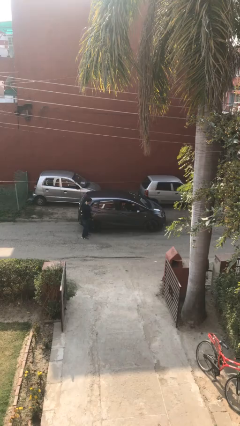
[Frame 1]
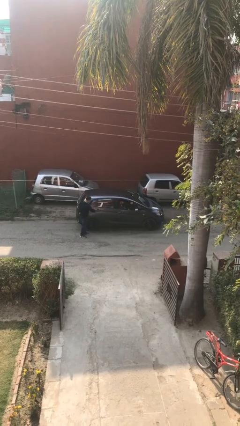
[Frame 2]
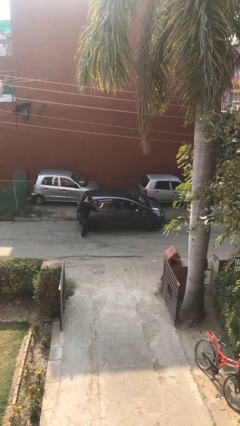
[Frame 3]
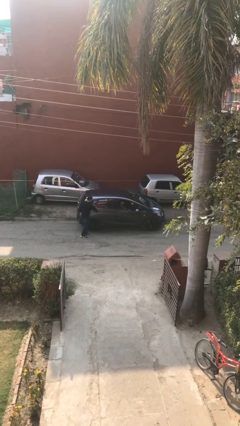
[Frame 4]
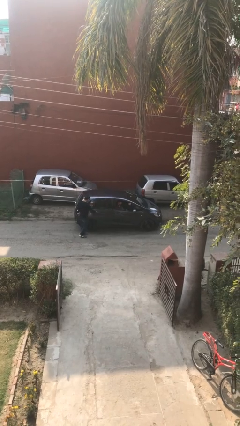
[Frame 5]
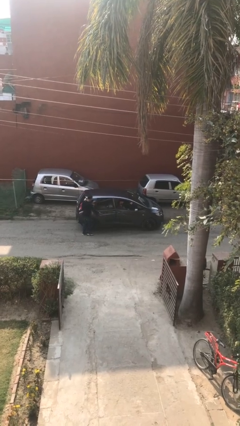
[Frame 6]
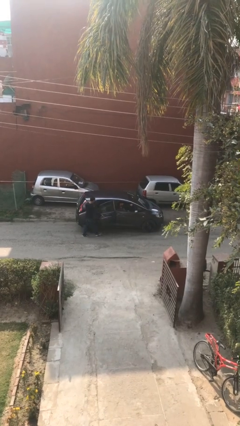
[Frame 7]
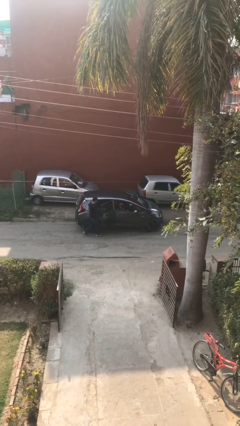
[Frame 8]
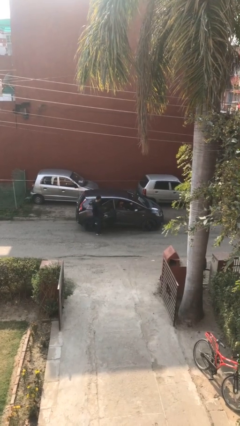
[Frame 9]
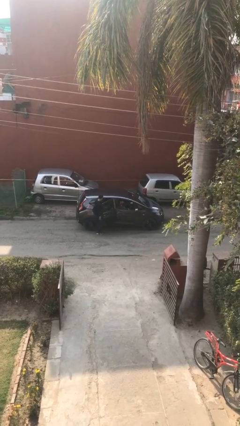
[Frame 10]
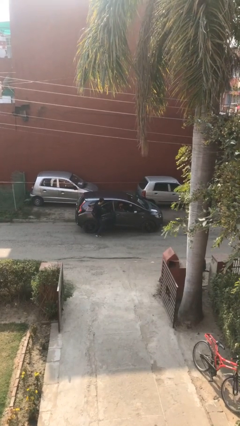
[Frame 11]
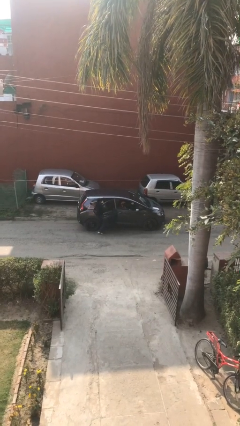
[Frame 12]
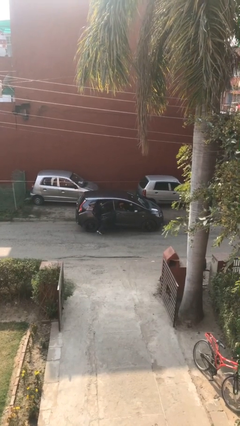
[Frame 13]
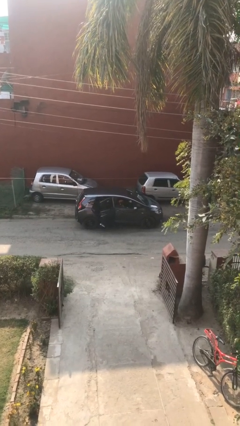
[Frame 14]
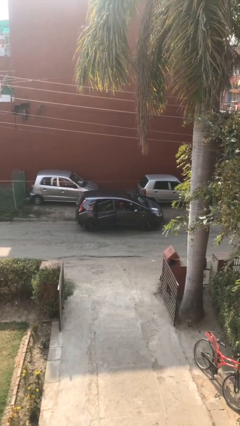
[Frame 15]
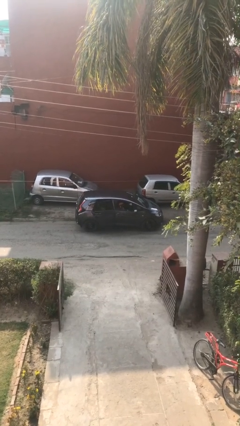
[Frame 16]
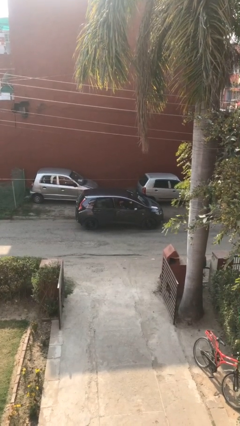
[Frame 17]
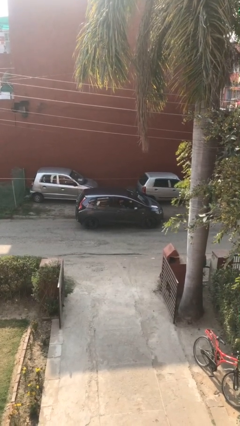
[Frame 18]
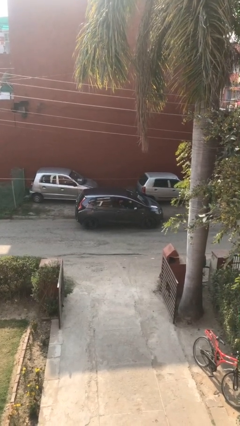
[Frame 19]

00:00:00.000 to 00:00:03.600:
car picks up person

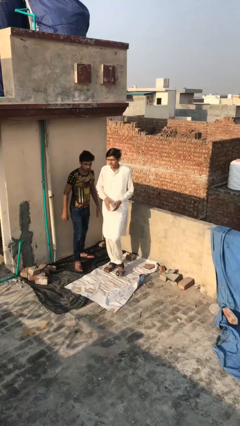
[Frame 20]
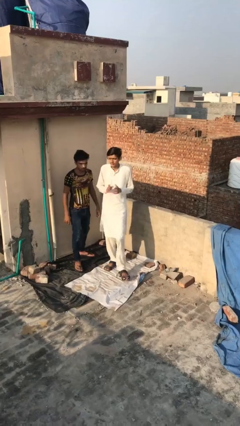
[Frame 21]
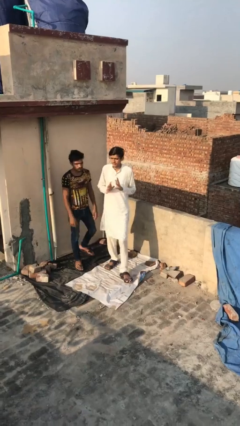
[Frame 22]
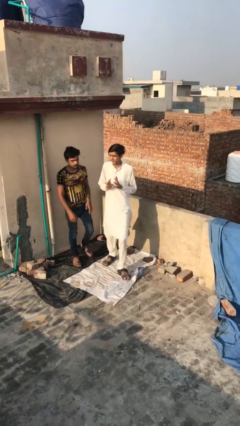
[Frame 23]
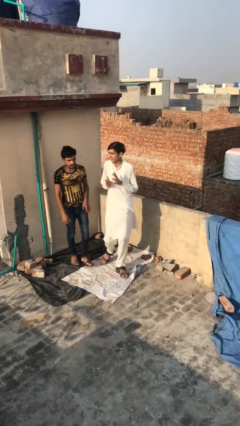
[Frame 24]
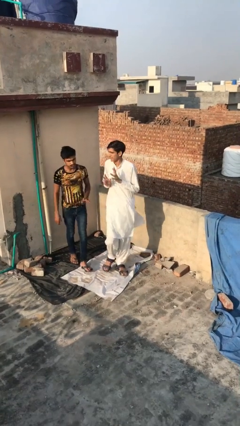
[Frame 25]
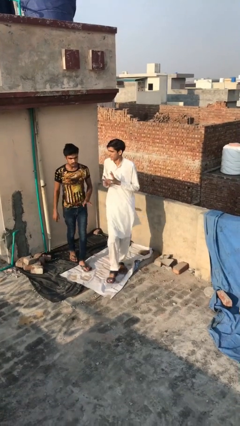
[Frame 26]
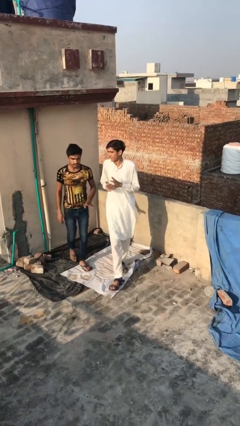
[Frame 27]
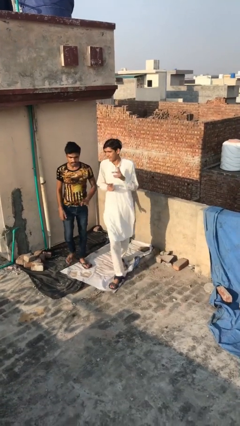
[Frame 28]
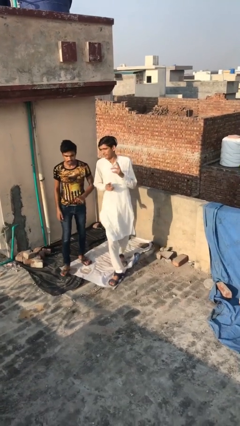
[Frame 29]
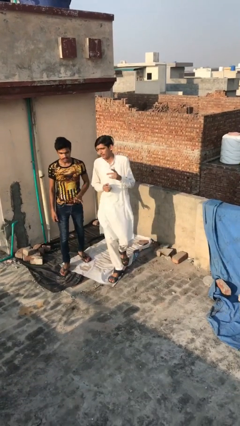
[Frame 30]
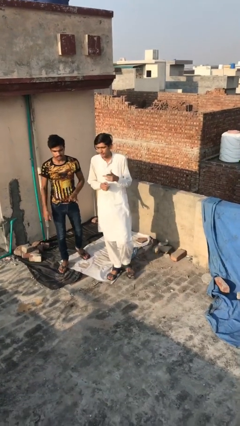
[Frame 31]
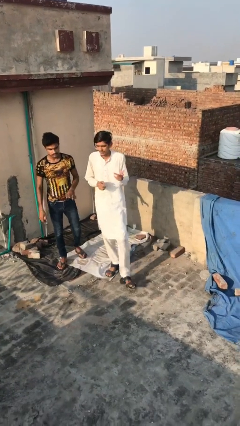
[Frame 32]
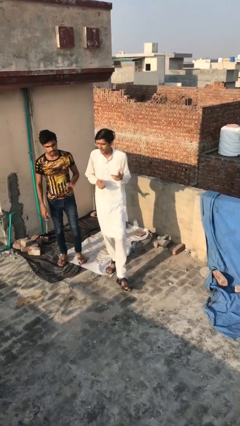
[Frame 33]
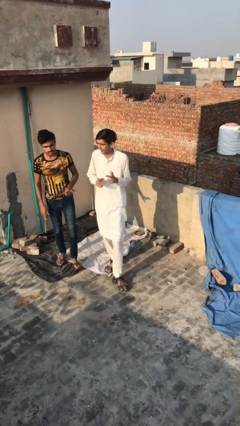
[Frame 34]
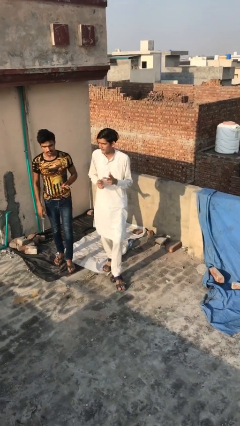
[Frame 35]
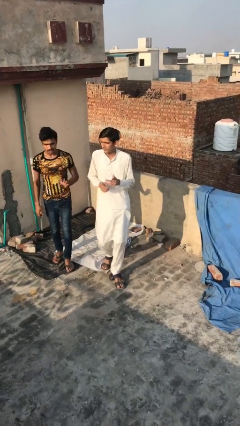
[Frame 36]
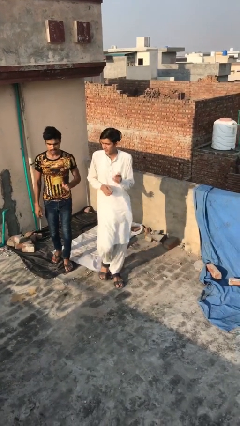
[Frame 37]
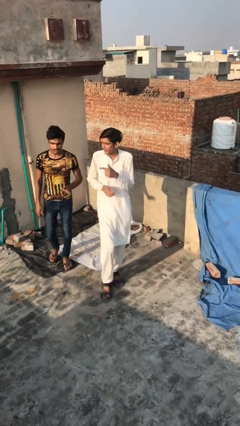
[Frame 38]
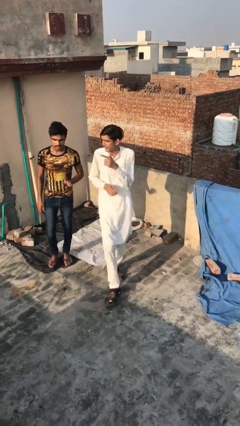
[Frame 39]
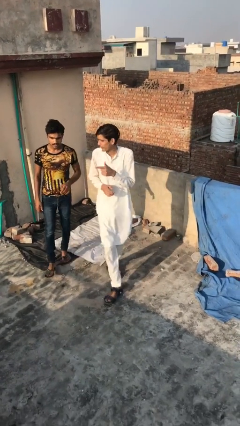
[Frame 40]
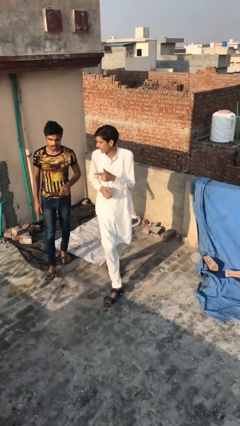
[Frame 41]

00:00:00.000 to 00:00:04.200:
person talks to person

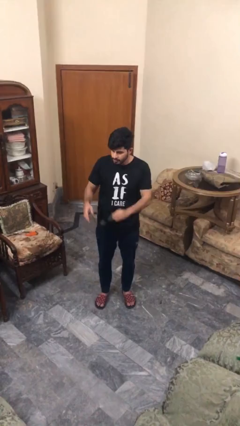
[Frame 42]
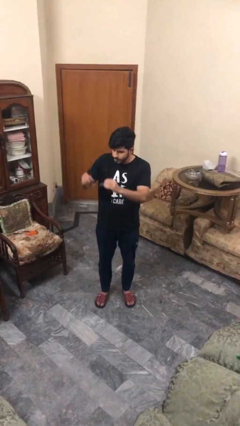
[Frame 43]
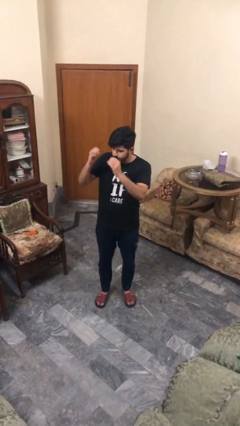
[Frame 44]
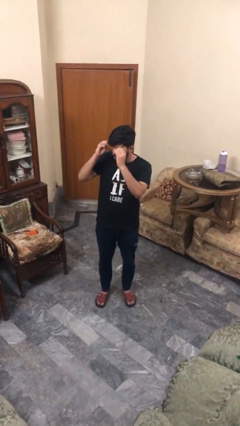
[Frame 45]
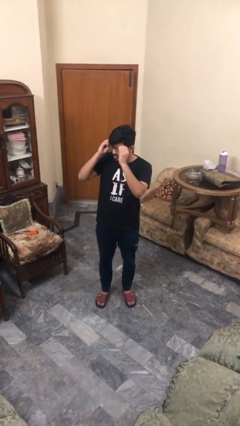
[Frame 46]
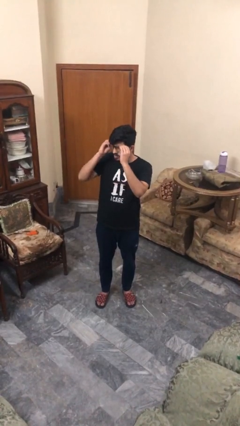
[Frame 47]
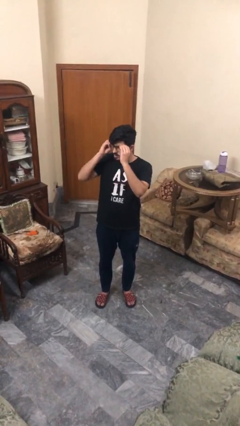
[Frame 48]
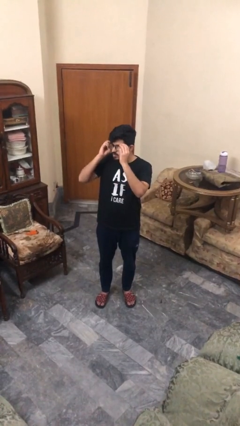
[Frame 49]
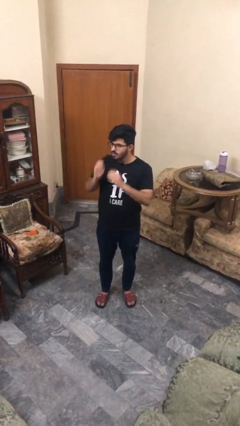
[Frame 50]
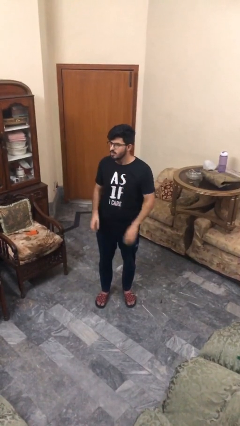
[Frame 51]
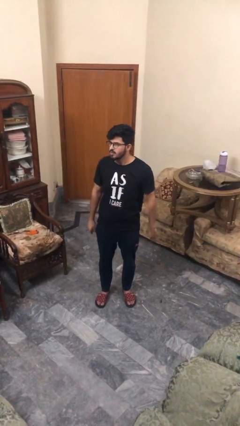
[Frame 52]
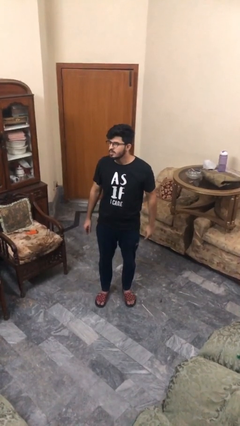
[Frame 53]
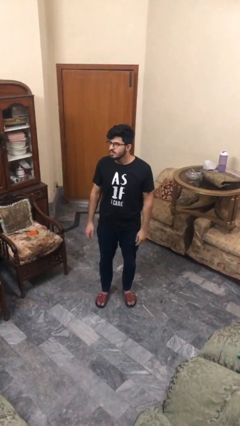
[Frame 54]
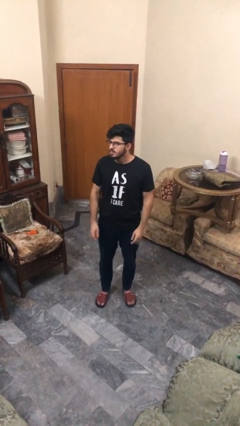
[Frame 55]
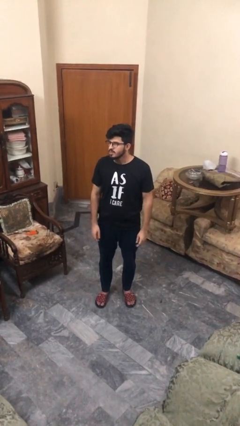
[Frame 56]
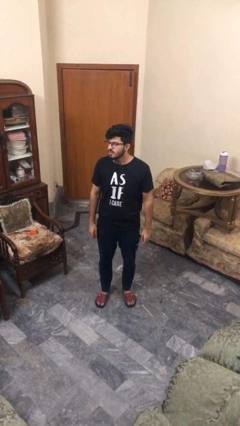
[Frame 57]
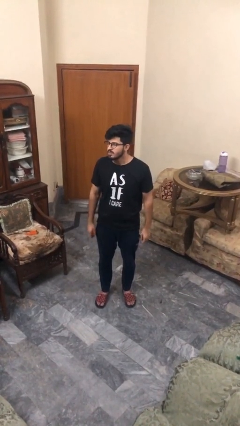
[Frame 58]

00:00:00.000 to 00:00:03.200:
person puts on glasses

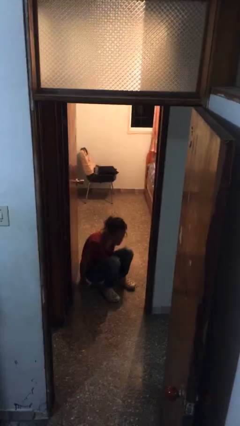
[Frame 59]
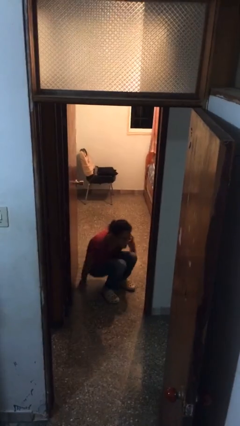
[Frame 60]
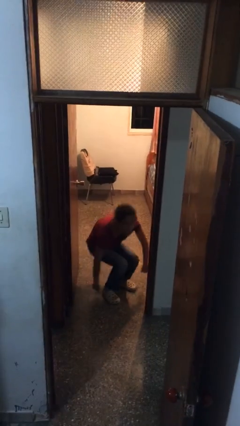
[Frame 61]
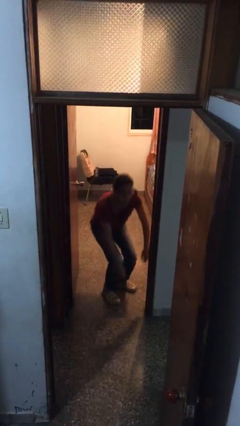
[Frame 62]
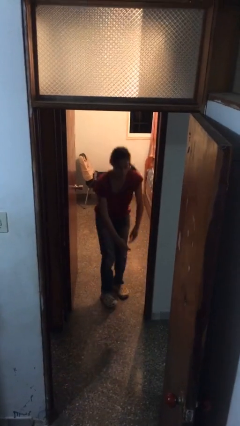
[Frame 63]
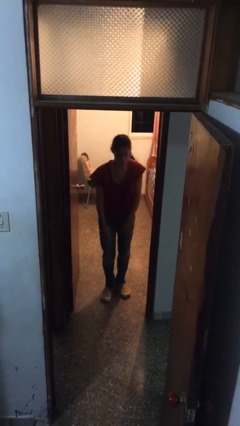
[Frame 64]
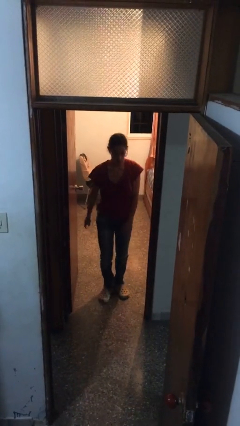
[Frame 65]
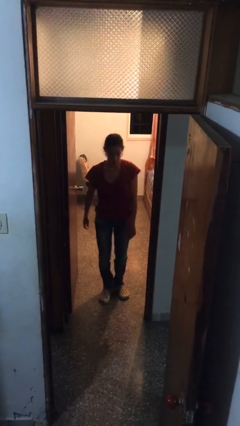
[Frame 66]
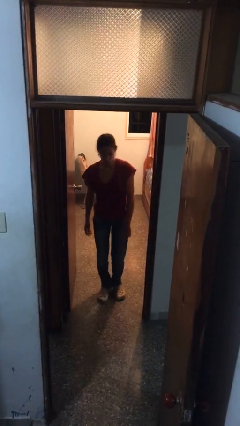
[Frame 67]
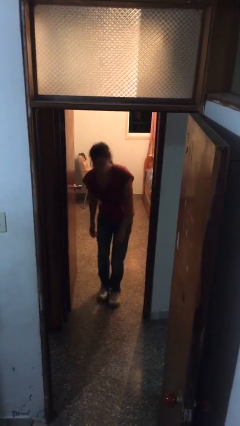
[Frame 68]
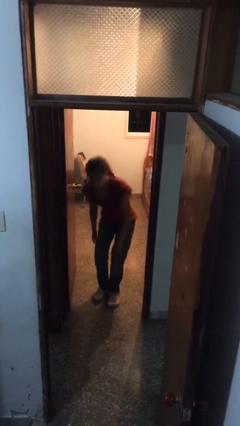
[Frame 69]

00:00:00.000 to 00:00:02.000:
person stands up

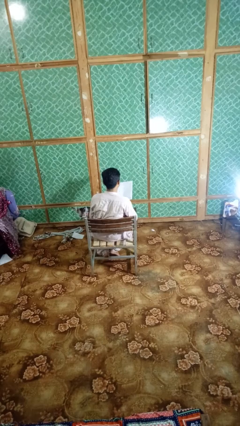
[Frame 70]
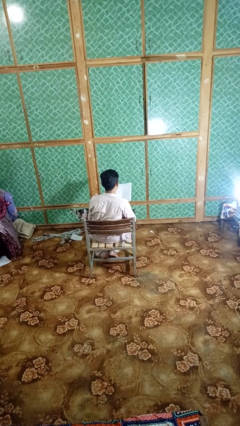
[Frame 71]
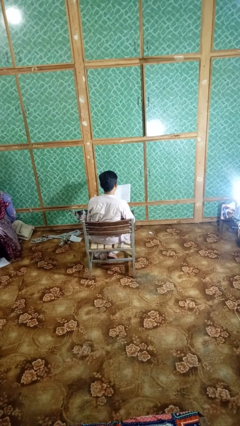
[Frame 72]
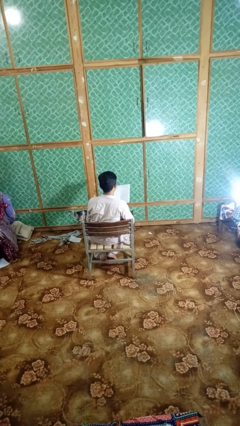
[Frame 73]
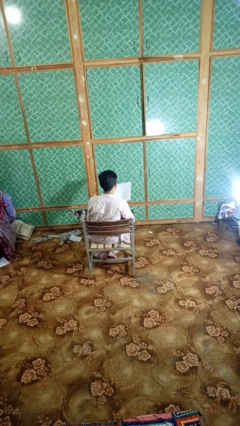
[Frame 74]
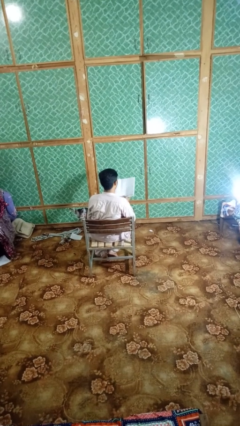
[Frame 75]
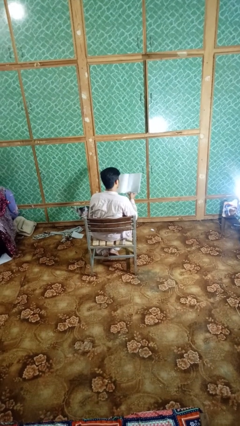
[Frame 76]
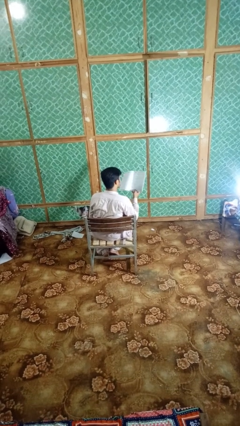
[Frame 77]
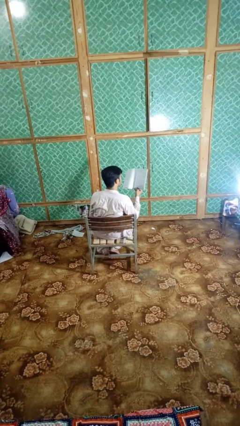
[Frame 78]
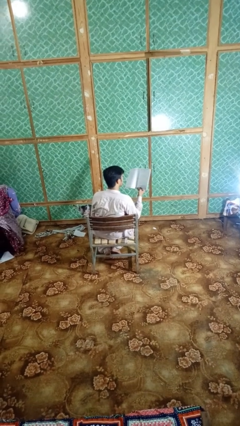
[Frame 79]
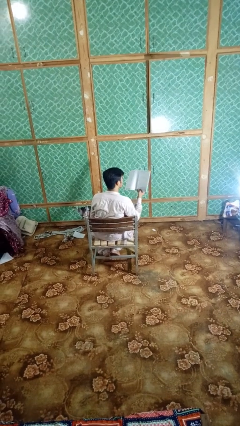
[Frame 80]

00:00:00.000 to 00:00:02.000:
person reads magazine

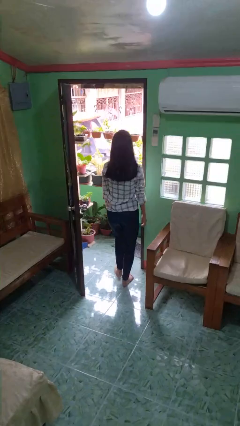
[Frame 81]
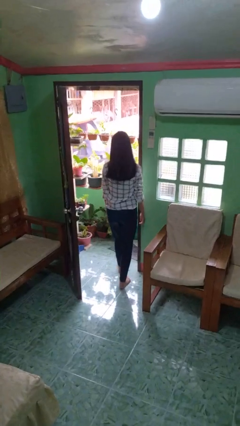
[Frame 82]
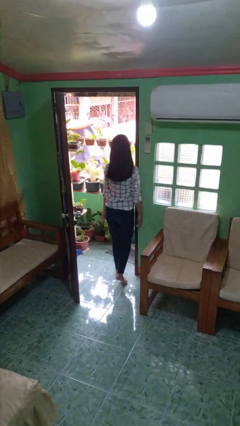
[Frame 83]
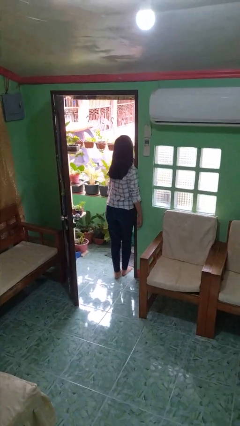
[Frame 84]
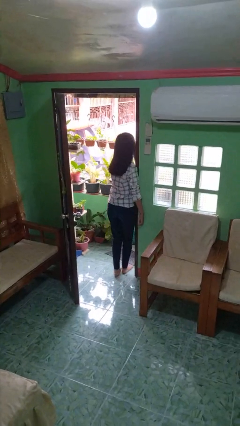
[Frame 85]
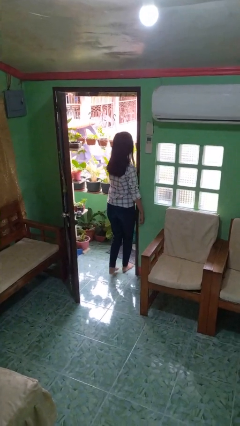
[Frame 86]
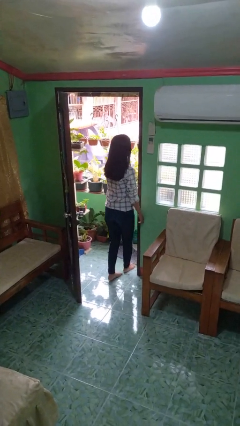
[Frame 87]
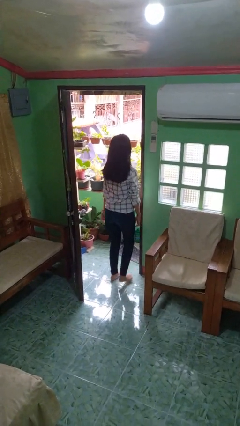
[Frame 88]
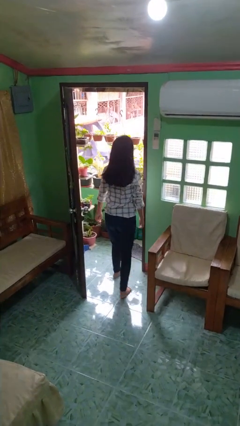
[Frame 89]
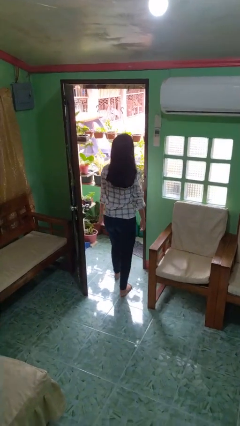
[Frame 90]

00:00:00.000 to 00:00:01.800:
person bumps into wall

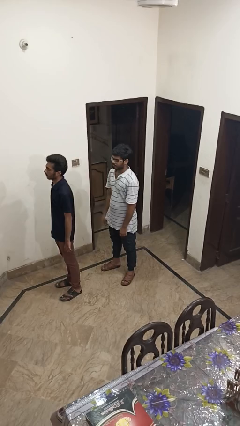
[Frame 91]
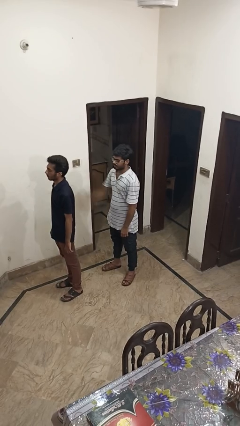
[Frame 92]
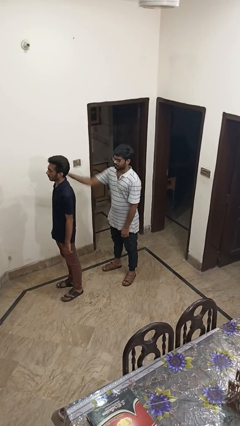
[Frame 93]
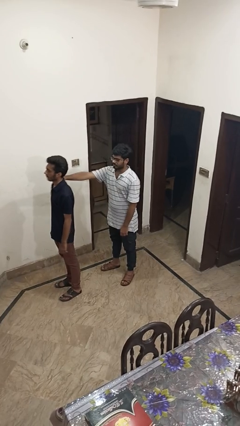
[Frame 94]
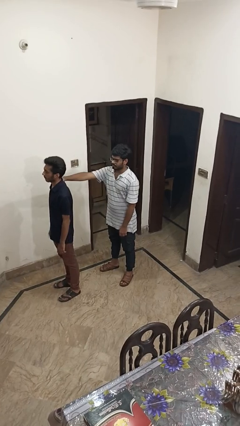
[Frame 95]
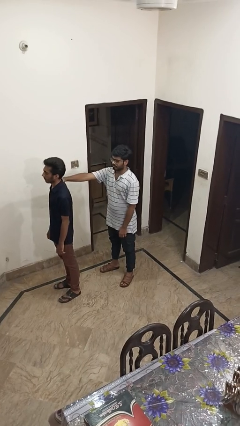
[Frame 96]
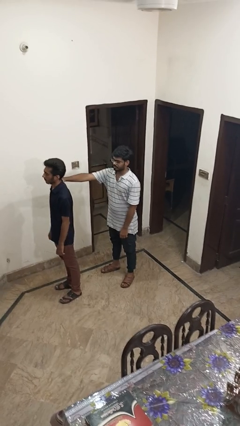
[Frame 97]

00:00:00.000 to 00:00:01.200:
person grabs person by shoulder
